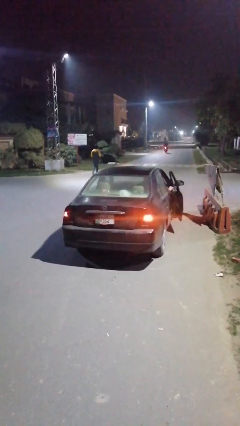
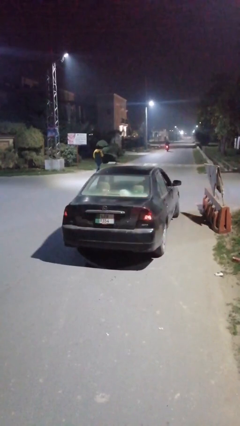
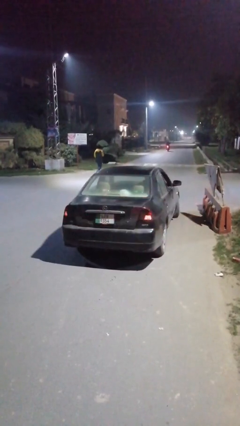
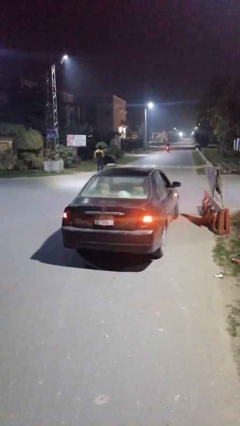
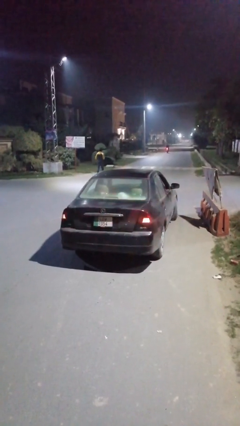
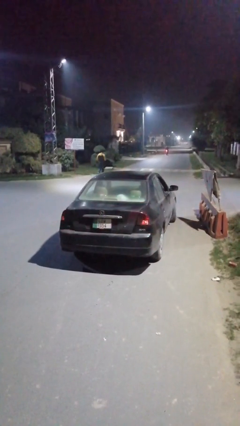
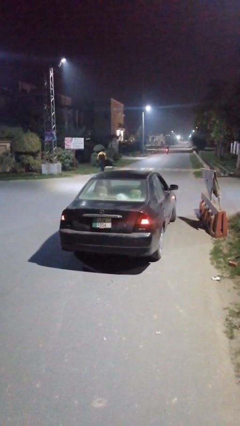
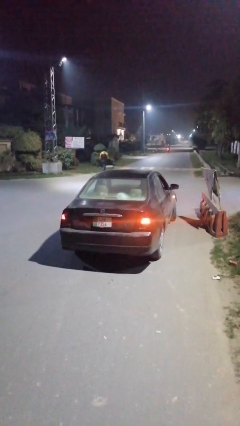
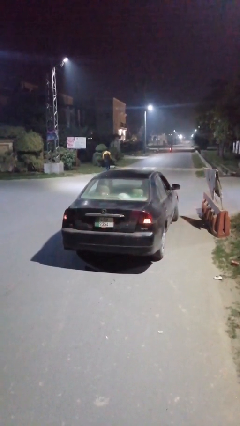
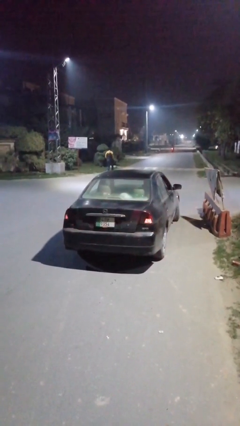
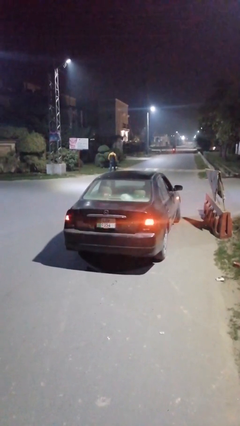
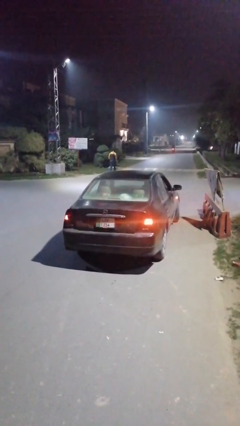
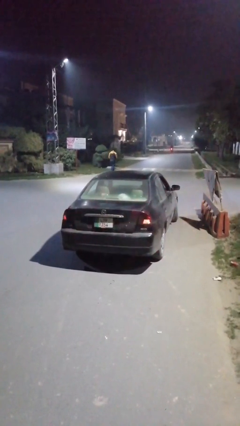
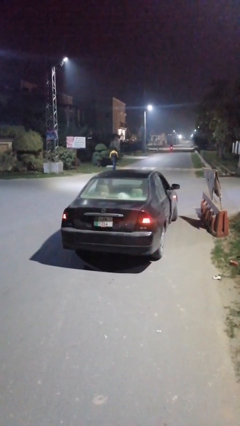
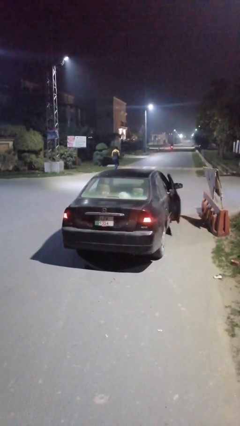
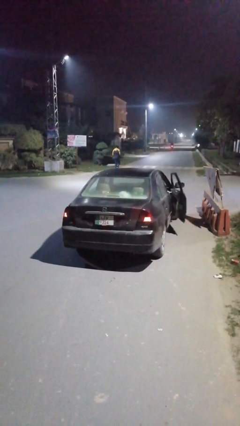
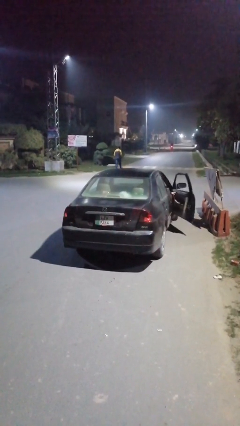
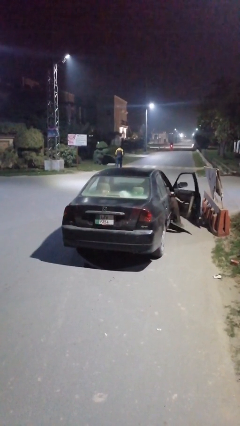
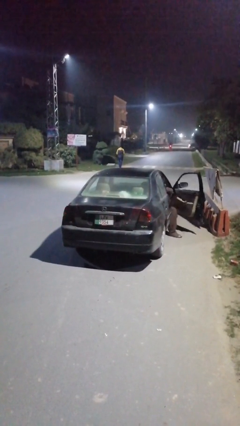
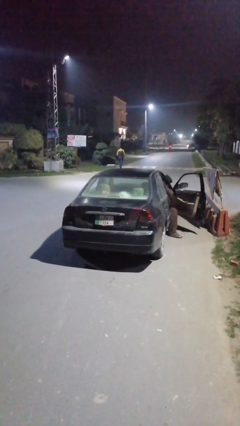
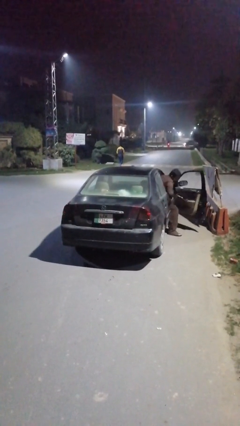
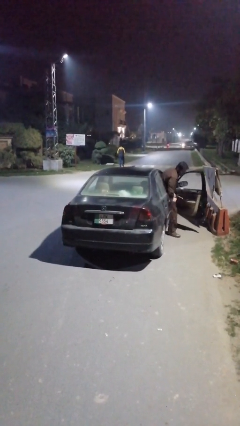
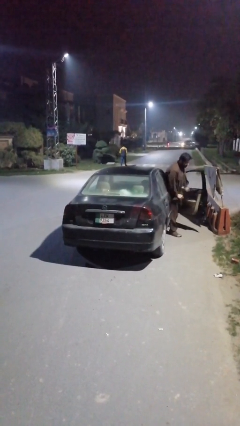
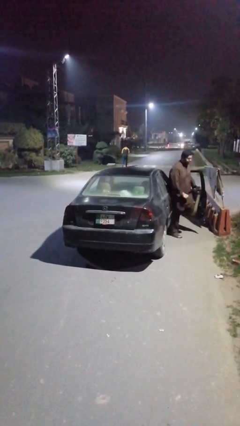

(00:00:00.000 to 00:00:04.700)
car picks up person

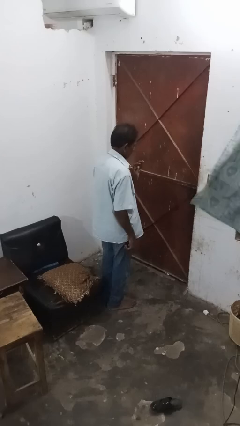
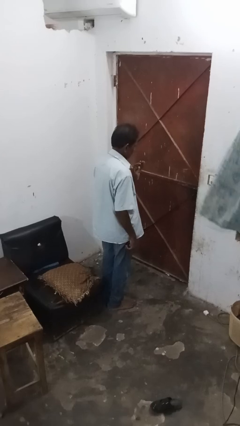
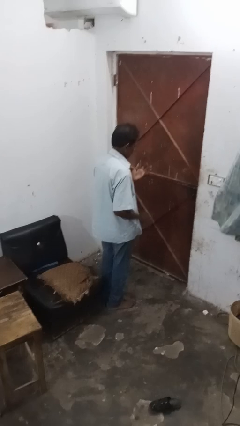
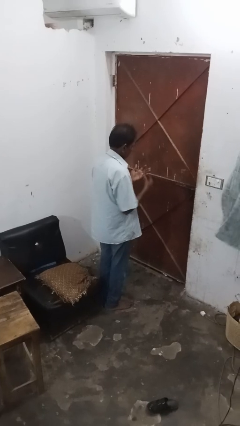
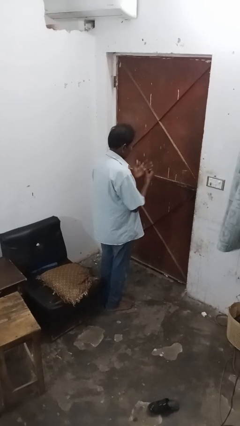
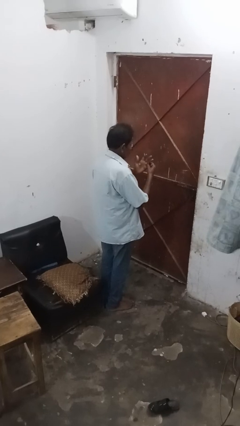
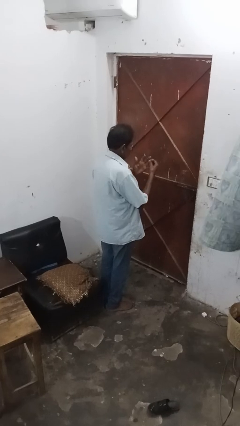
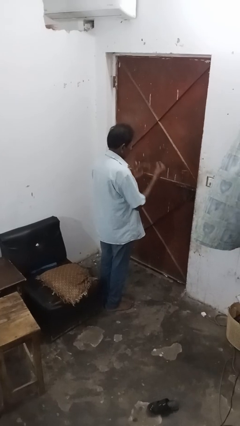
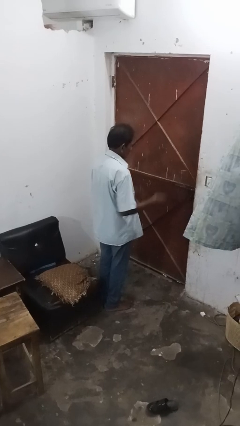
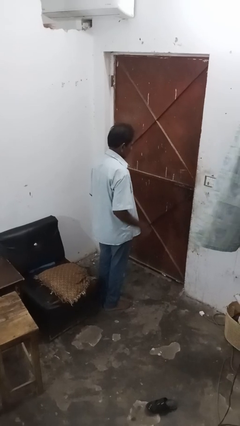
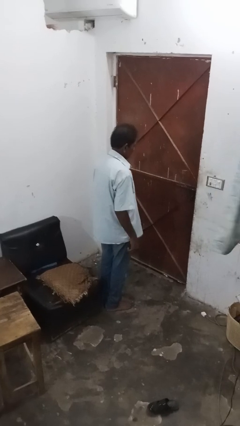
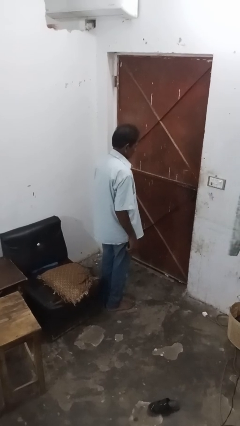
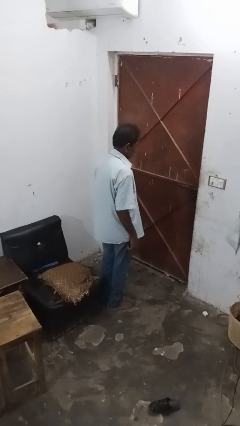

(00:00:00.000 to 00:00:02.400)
person takes off ring

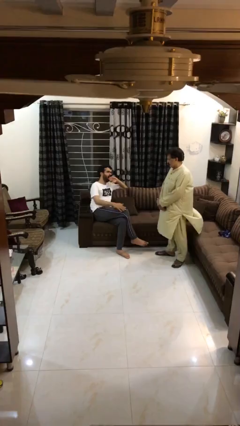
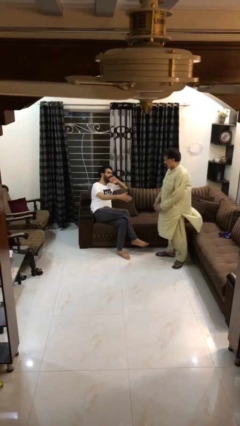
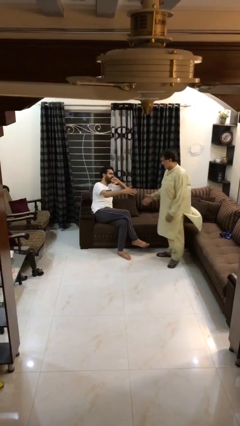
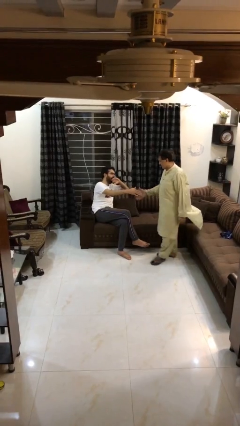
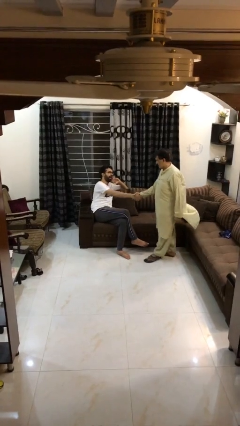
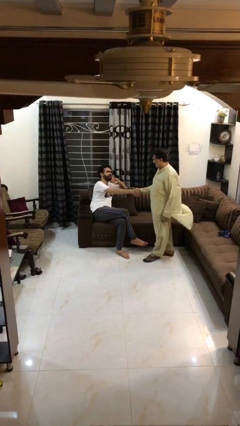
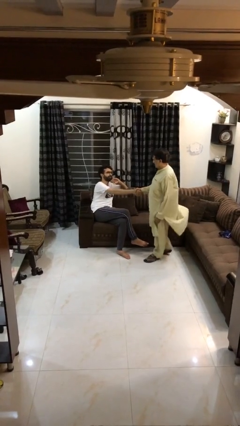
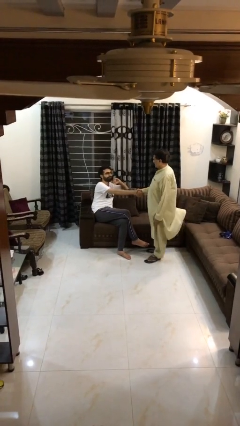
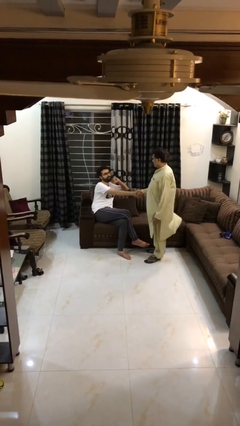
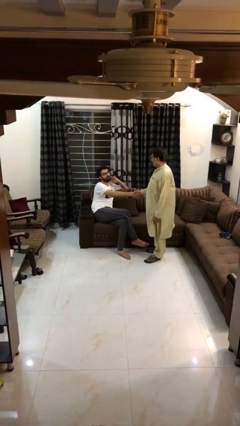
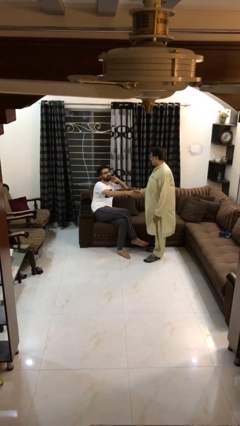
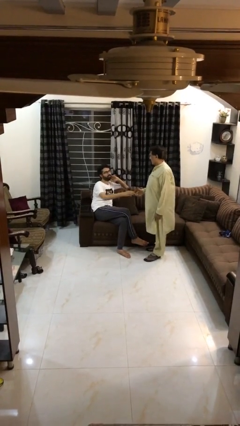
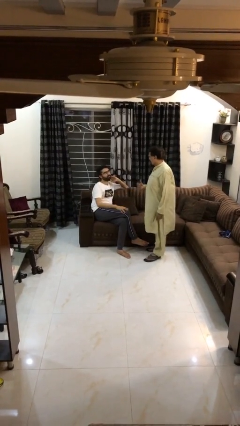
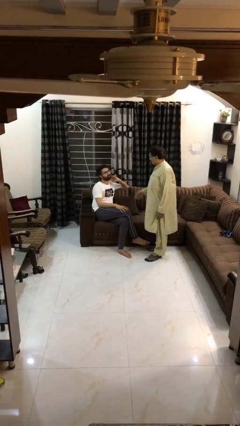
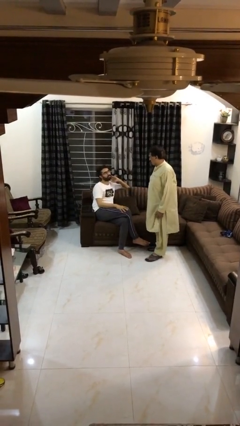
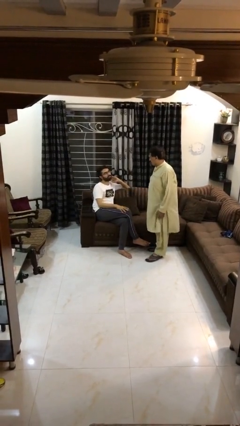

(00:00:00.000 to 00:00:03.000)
person shakes hand

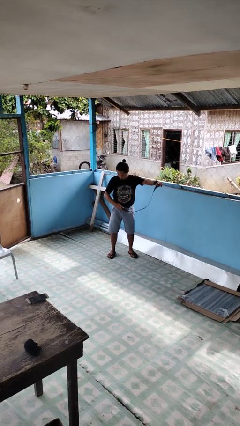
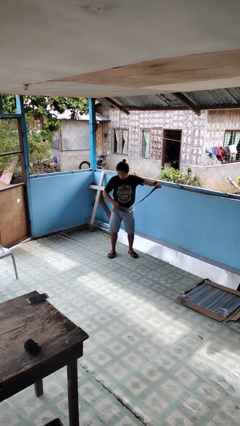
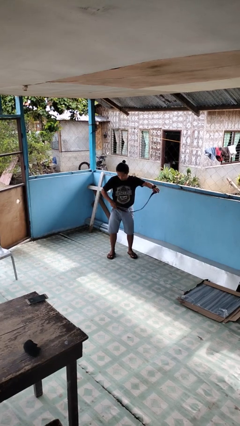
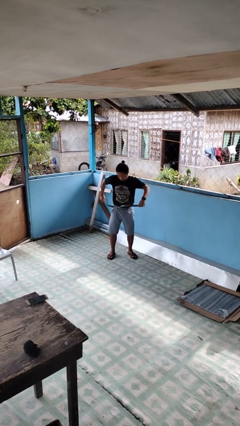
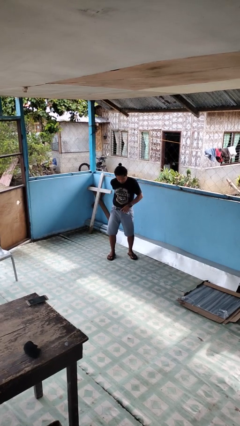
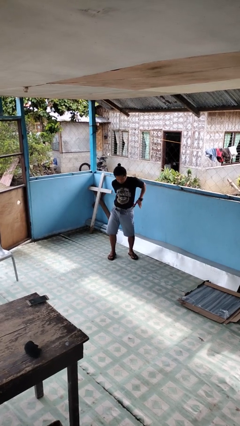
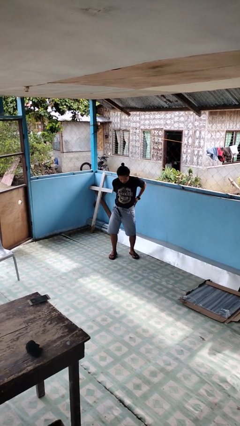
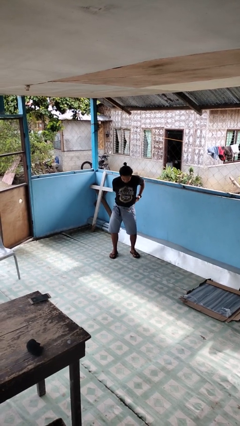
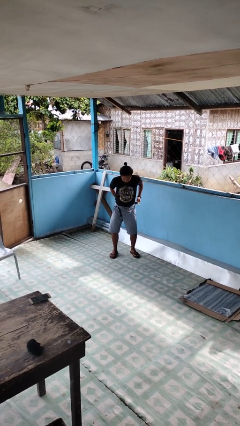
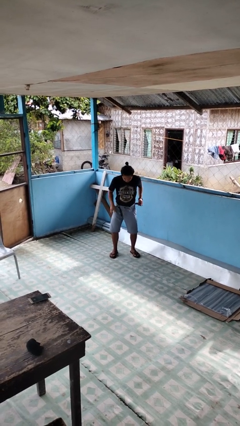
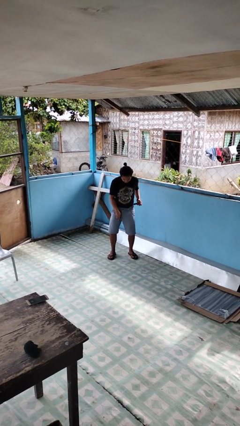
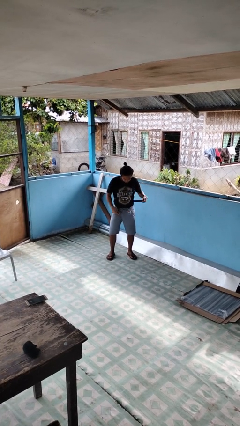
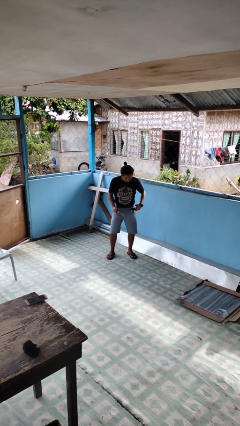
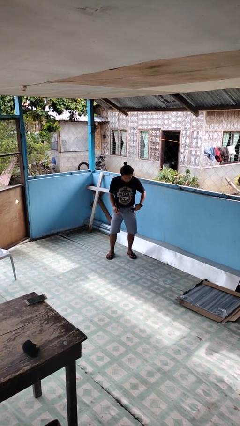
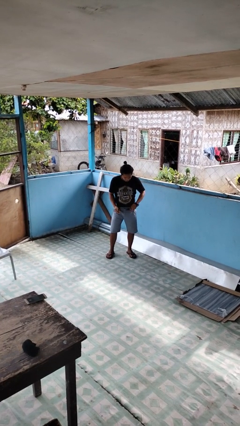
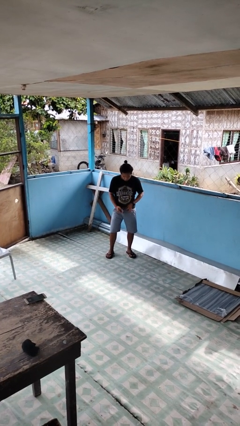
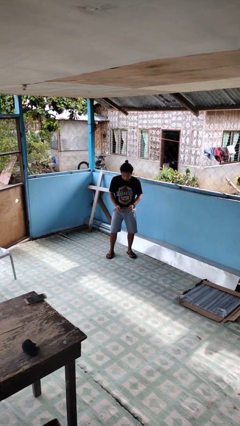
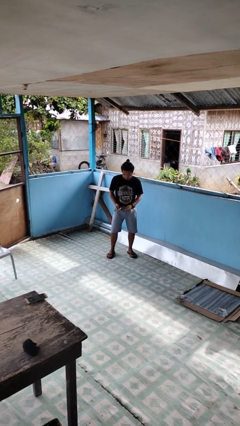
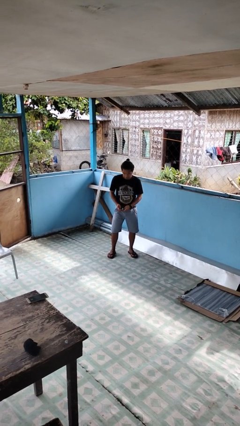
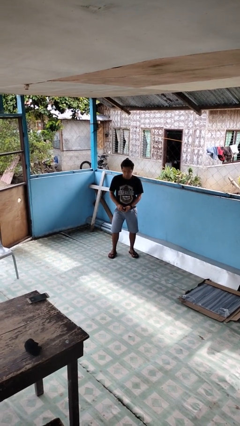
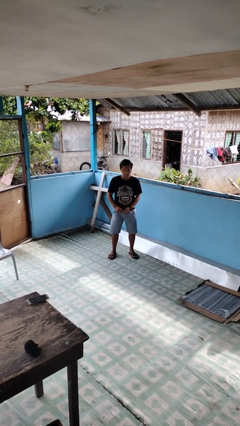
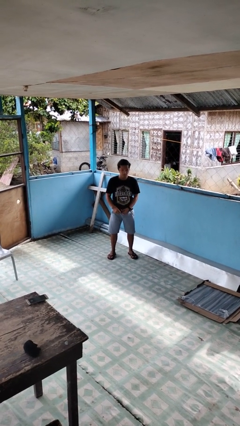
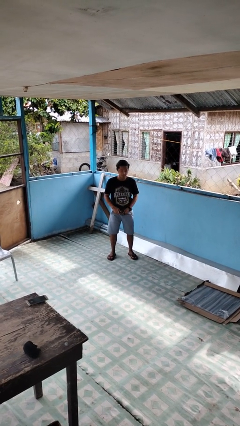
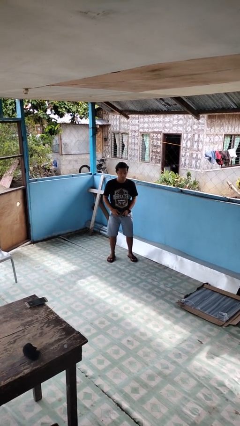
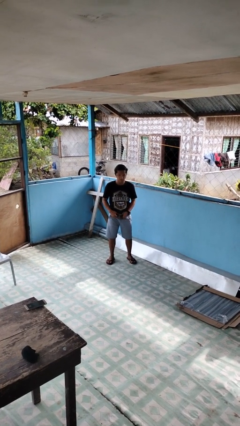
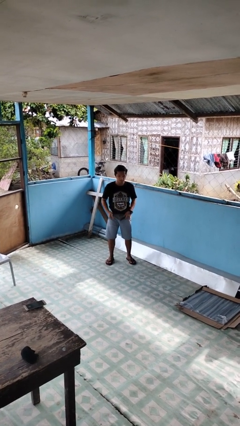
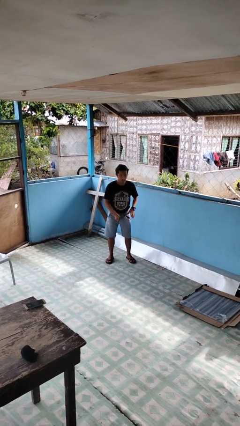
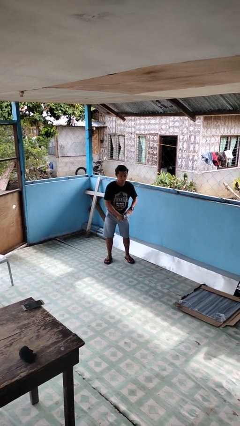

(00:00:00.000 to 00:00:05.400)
person puts on belt

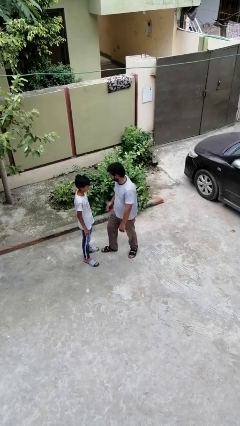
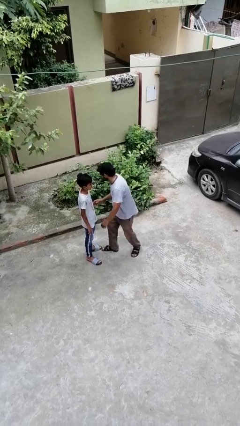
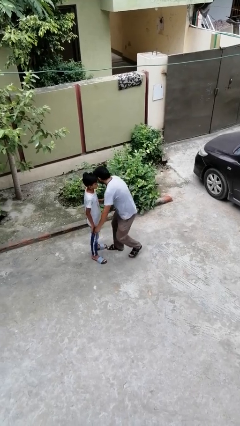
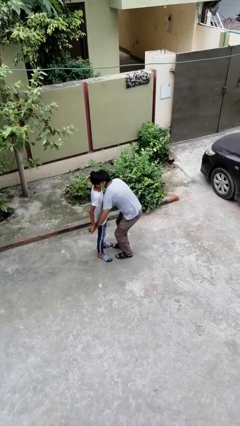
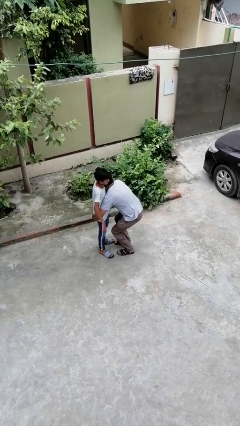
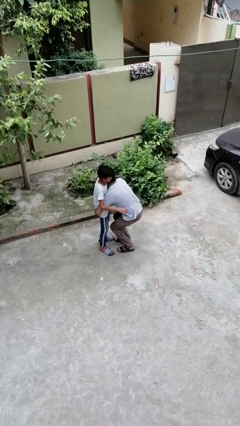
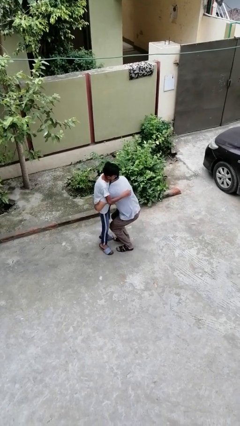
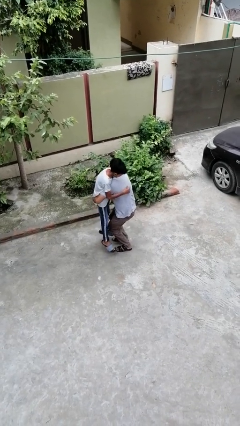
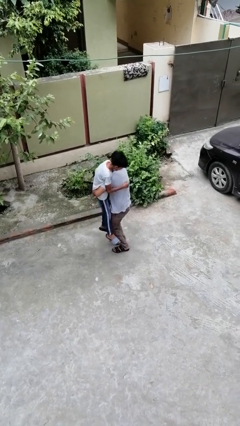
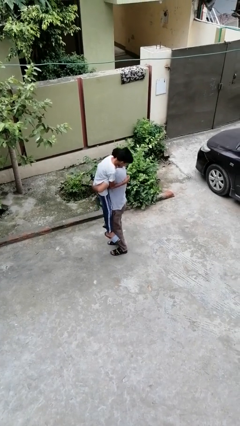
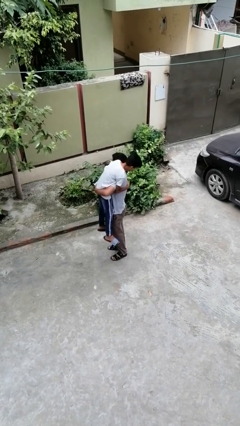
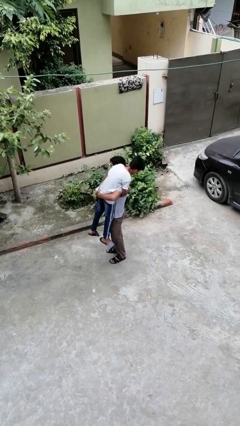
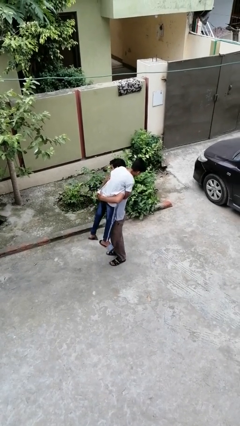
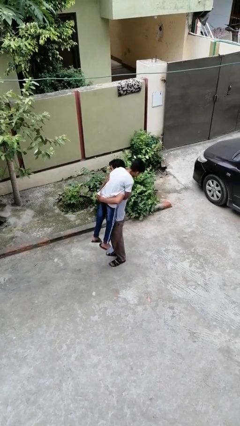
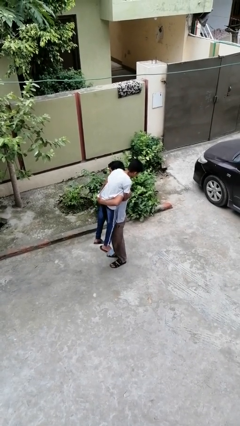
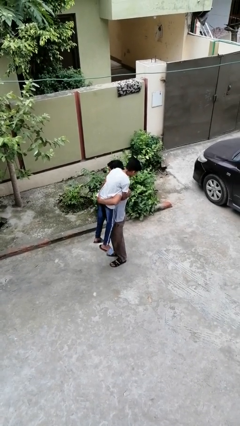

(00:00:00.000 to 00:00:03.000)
person picks up person
